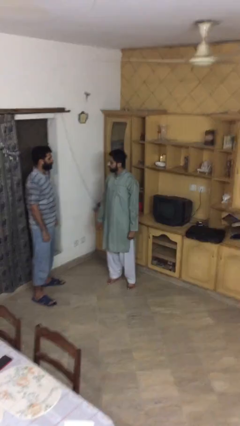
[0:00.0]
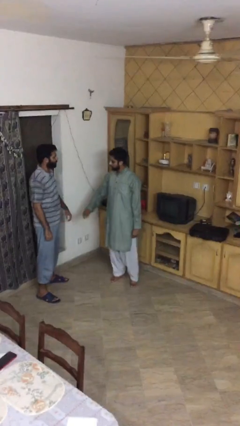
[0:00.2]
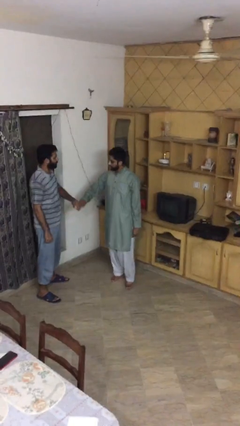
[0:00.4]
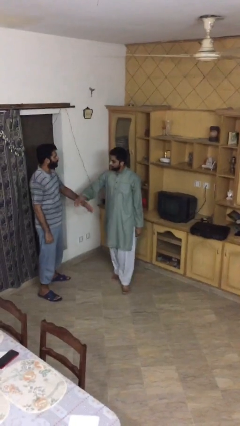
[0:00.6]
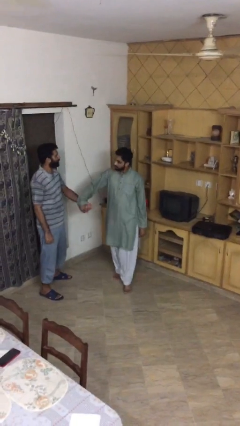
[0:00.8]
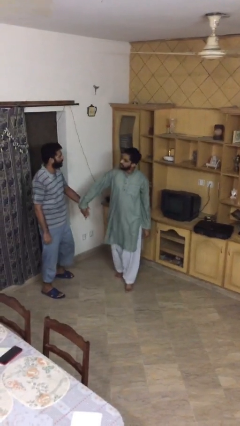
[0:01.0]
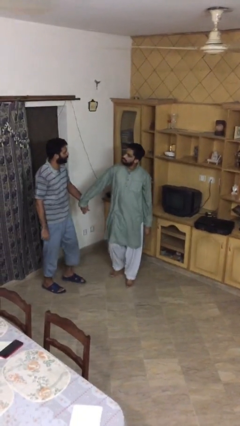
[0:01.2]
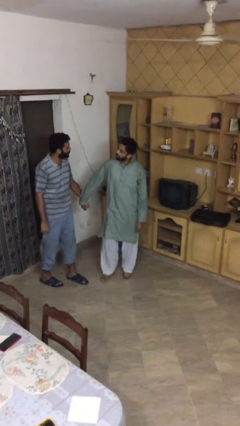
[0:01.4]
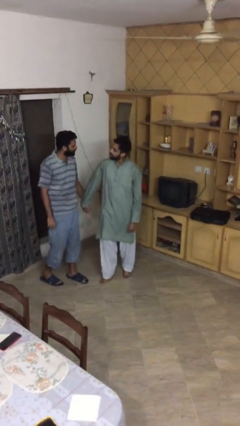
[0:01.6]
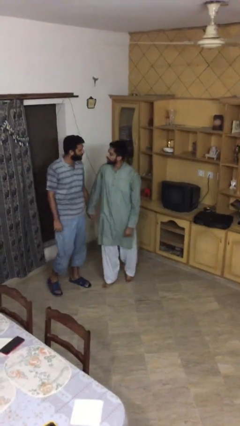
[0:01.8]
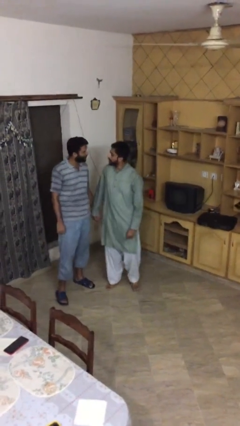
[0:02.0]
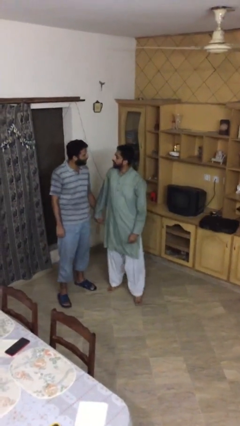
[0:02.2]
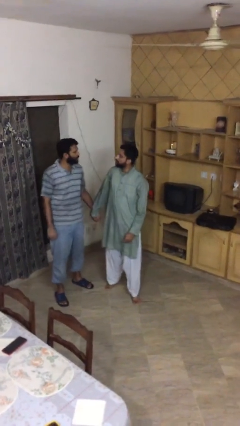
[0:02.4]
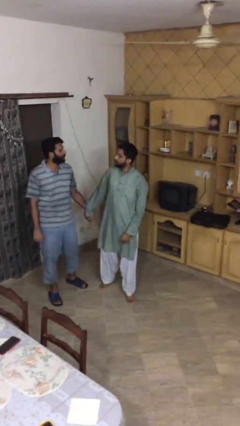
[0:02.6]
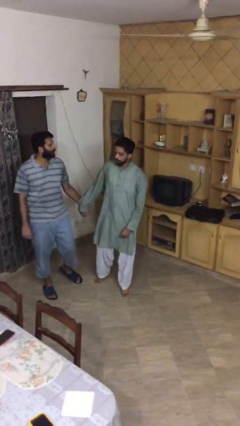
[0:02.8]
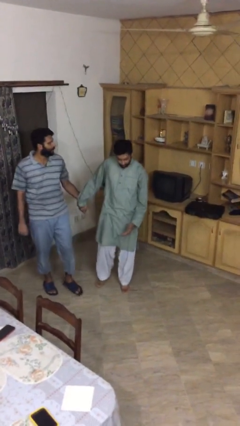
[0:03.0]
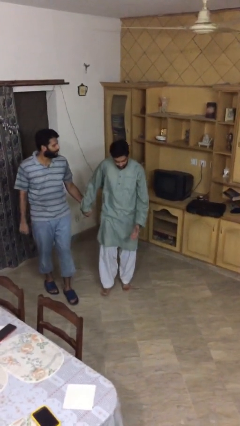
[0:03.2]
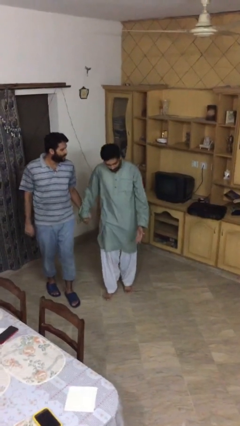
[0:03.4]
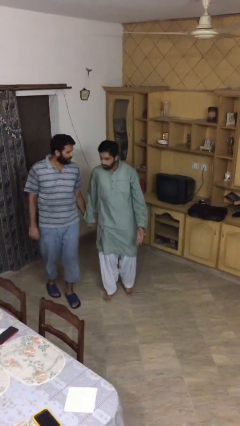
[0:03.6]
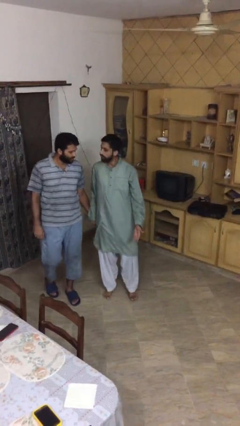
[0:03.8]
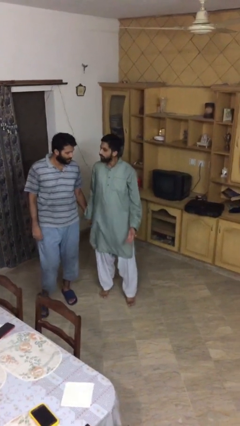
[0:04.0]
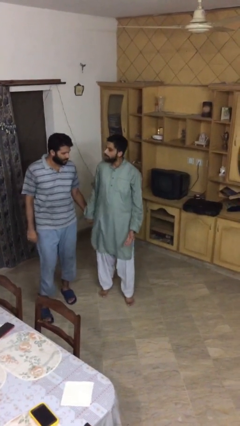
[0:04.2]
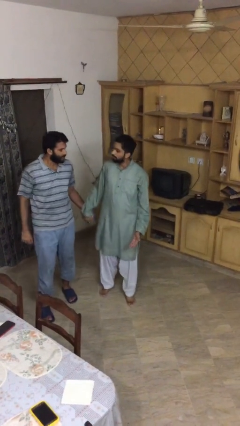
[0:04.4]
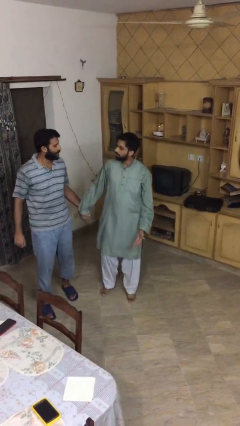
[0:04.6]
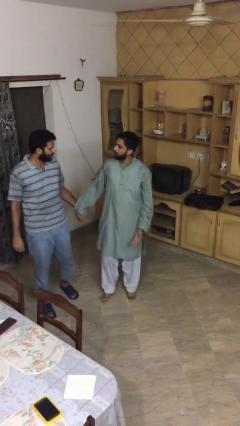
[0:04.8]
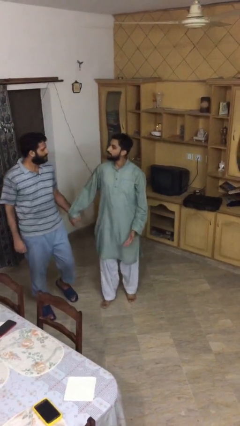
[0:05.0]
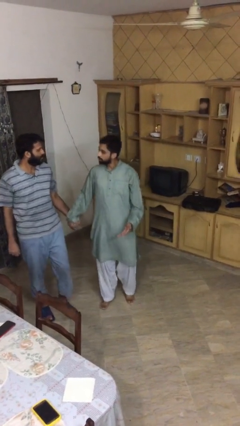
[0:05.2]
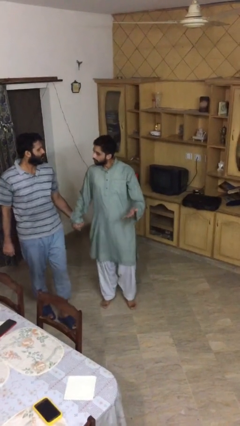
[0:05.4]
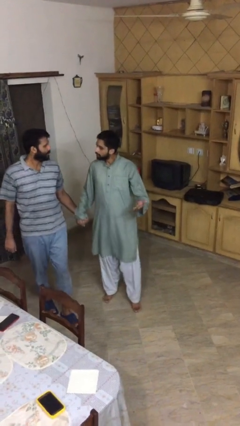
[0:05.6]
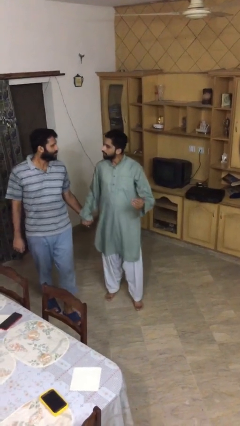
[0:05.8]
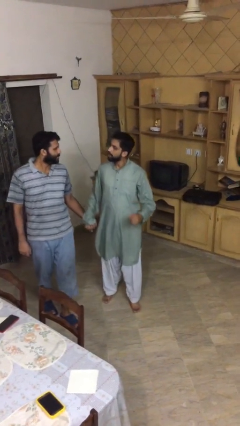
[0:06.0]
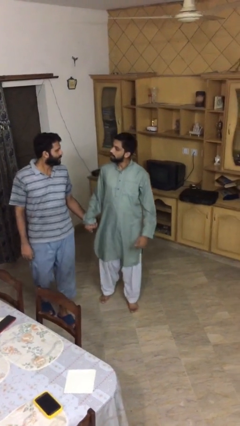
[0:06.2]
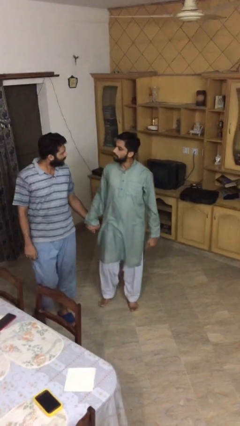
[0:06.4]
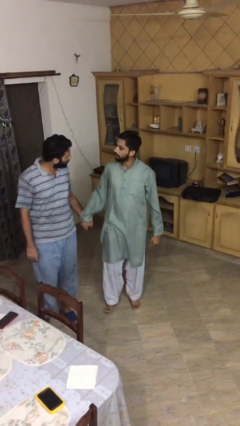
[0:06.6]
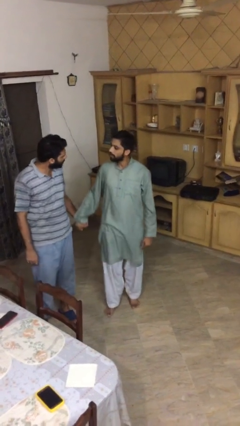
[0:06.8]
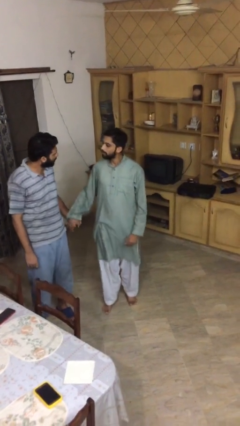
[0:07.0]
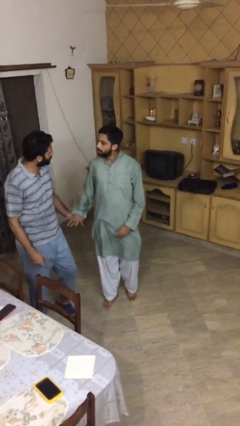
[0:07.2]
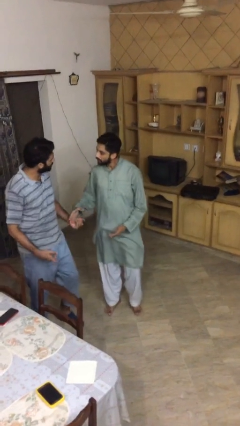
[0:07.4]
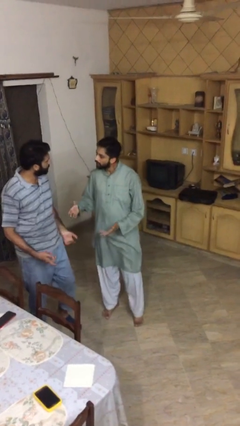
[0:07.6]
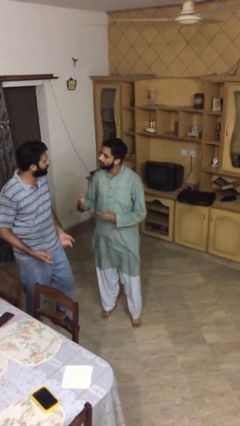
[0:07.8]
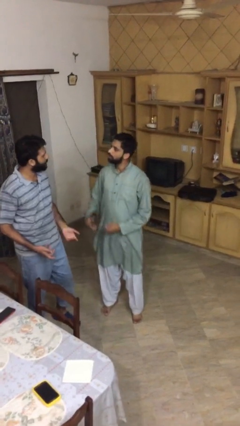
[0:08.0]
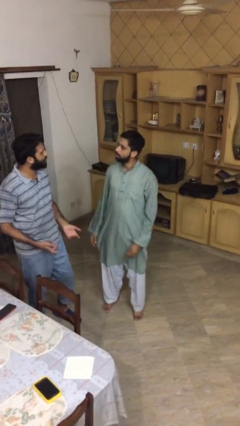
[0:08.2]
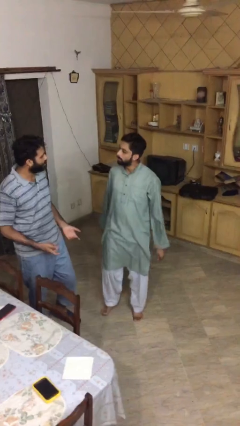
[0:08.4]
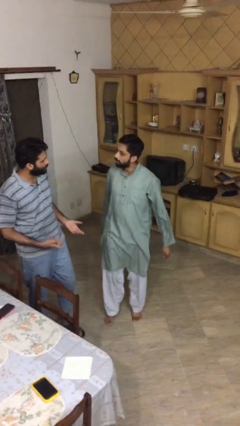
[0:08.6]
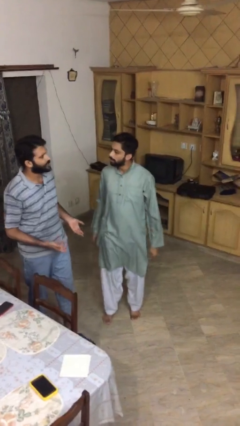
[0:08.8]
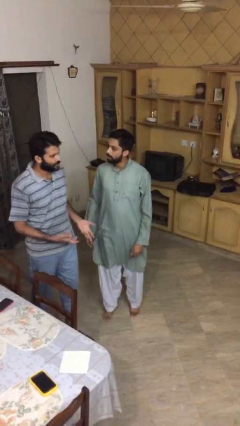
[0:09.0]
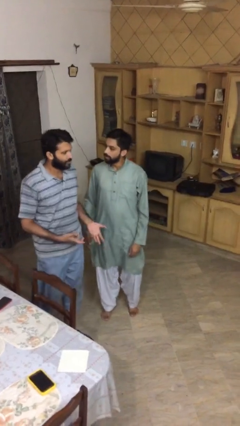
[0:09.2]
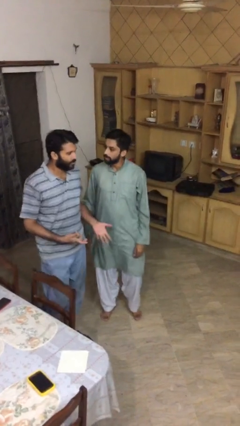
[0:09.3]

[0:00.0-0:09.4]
person holds hand

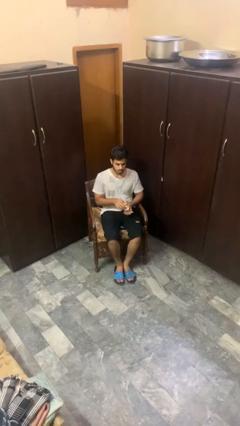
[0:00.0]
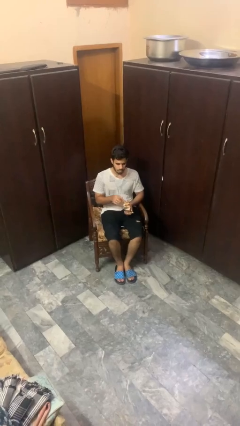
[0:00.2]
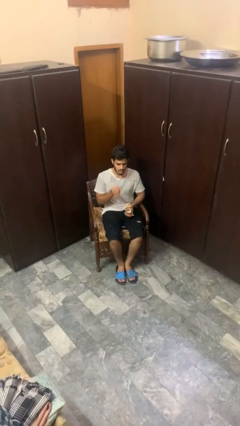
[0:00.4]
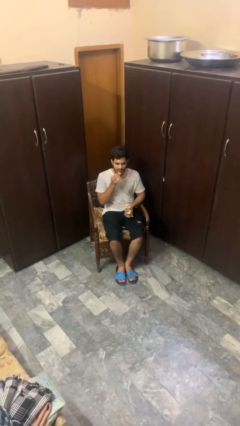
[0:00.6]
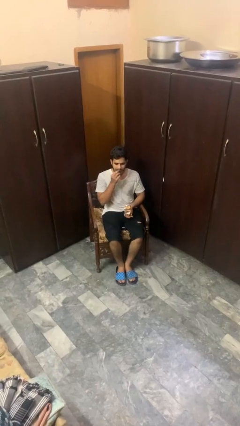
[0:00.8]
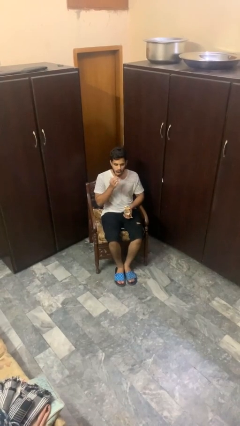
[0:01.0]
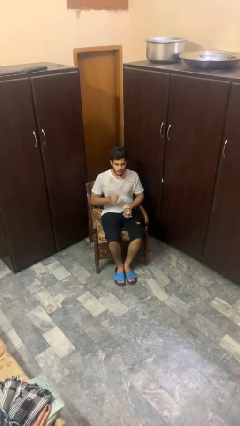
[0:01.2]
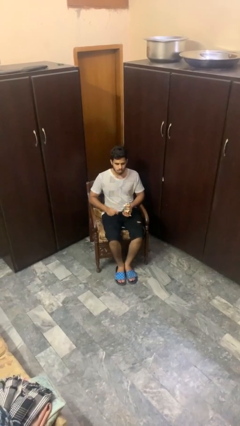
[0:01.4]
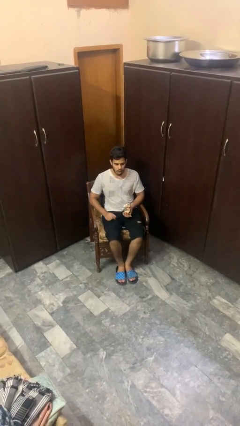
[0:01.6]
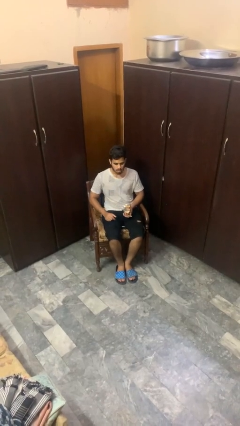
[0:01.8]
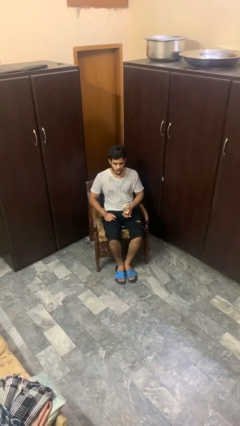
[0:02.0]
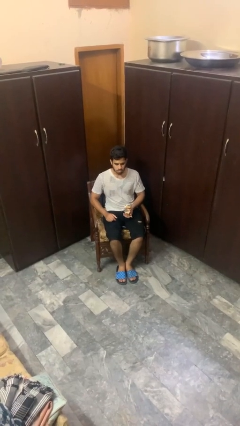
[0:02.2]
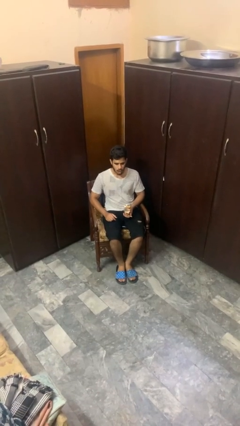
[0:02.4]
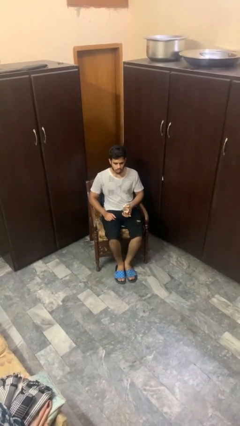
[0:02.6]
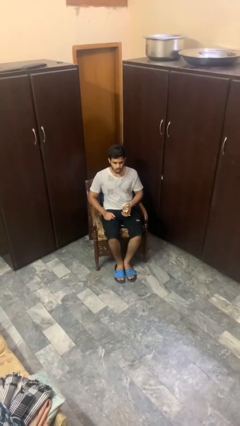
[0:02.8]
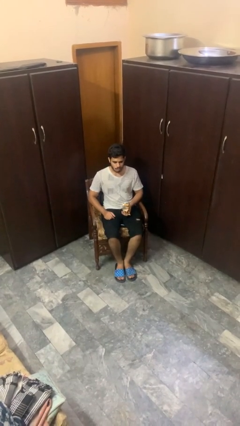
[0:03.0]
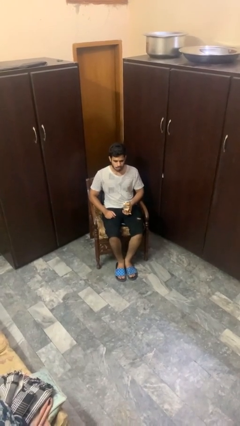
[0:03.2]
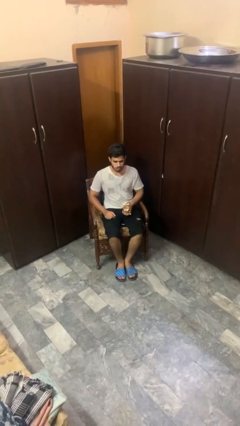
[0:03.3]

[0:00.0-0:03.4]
person eats snack from bag

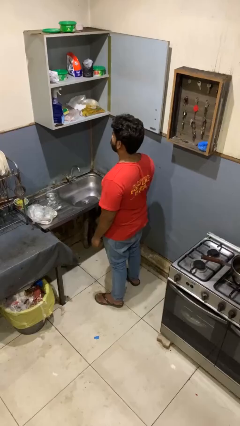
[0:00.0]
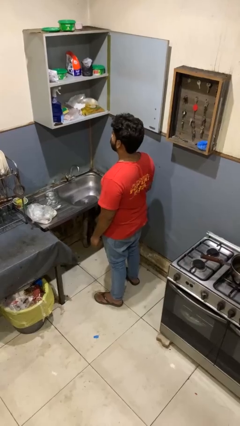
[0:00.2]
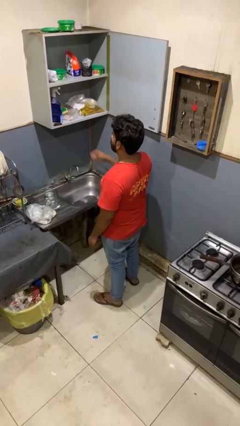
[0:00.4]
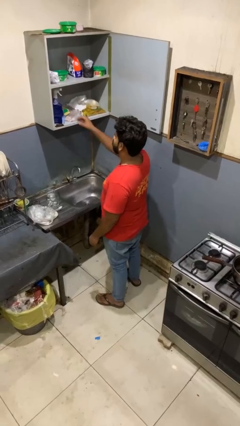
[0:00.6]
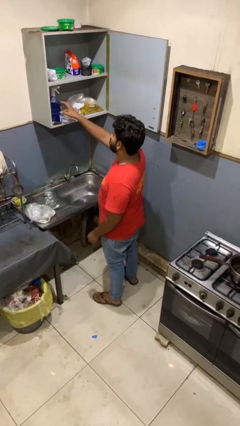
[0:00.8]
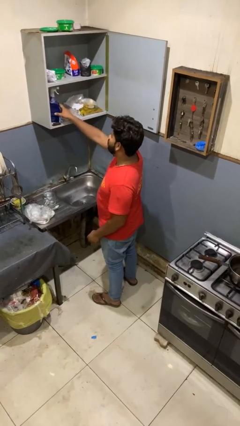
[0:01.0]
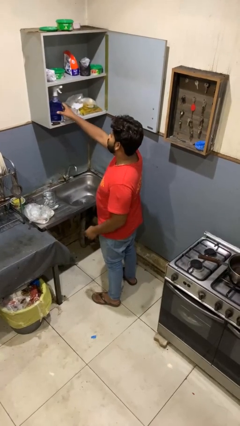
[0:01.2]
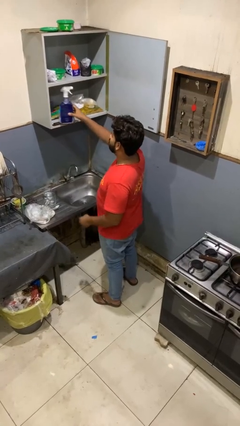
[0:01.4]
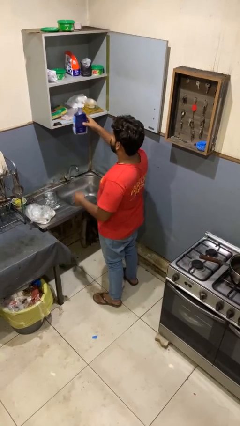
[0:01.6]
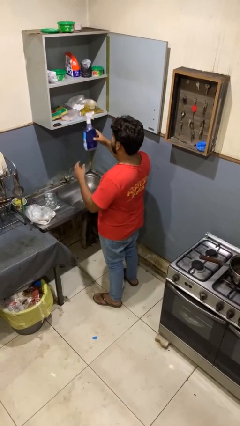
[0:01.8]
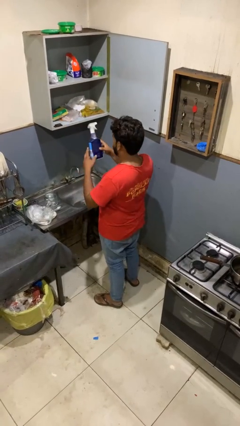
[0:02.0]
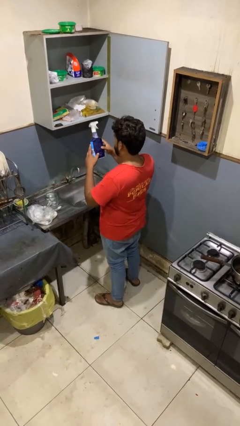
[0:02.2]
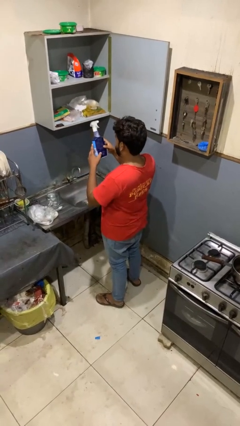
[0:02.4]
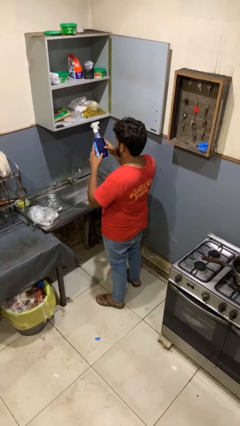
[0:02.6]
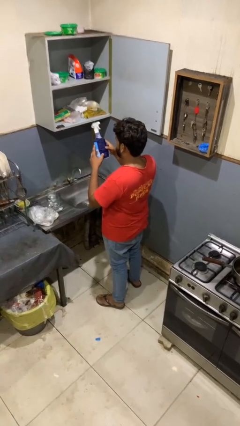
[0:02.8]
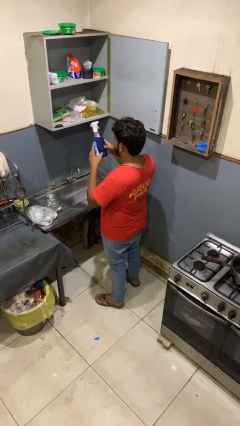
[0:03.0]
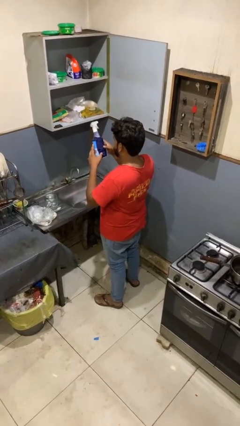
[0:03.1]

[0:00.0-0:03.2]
person picks up object from cabinet

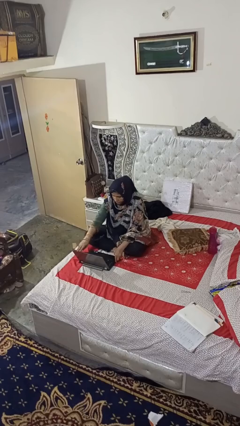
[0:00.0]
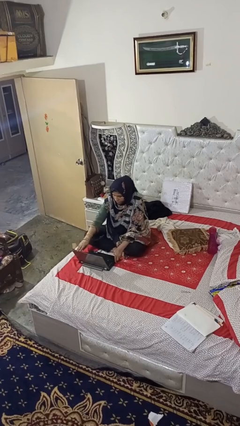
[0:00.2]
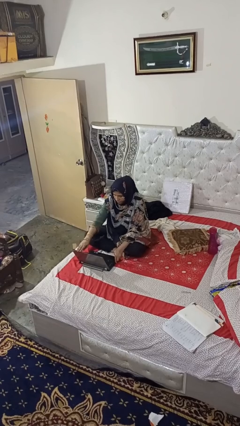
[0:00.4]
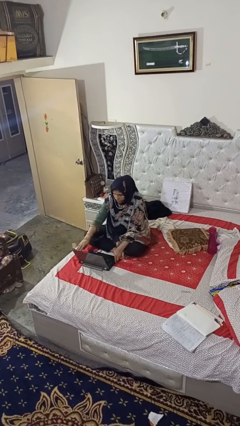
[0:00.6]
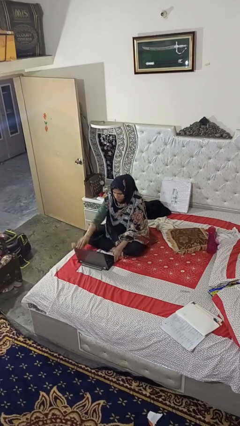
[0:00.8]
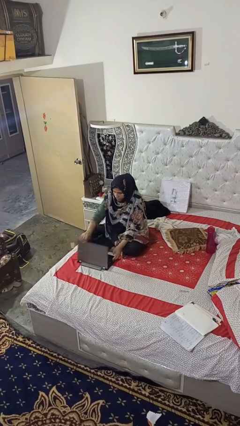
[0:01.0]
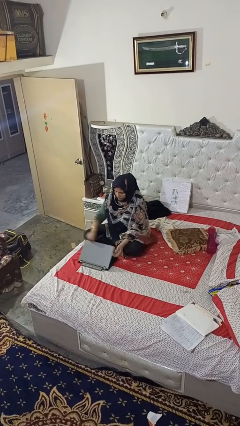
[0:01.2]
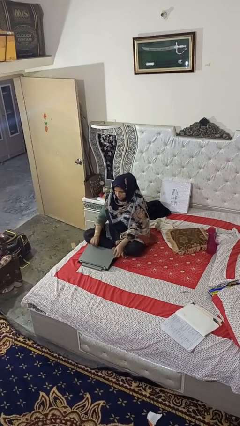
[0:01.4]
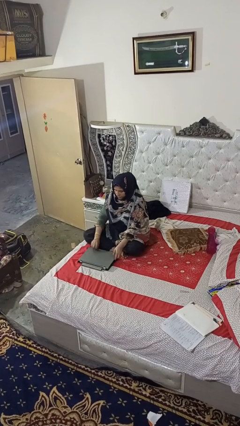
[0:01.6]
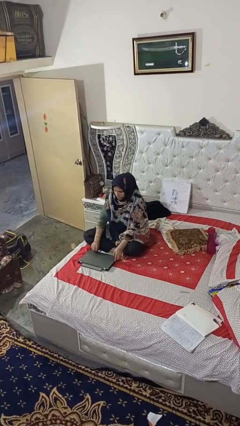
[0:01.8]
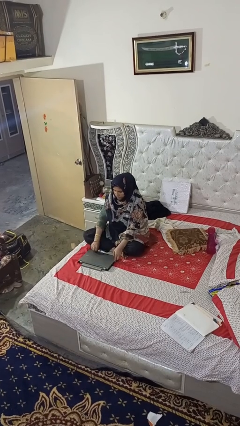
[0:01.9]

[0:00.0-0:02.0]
person closes laptop
